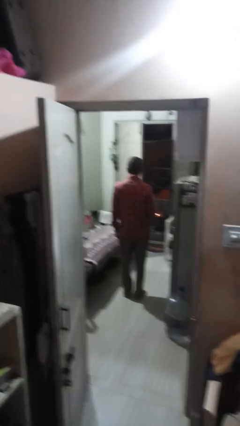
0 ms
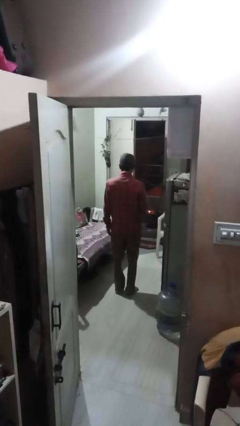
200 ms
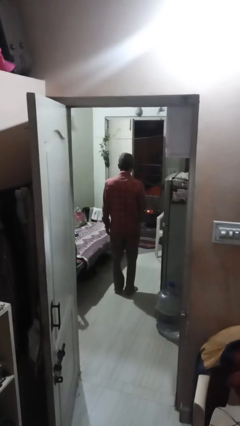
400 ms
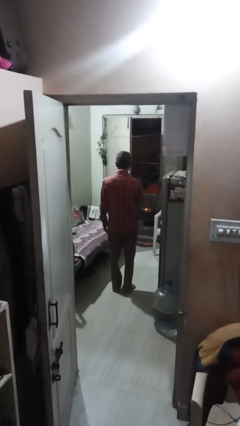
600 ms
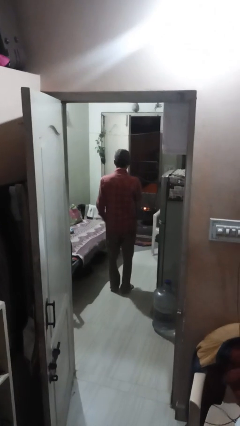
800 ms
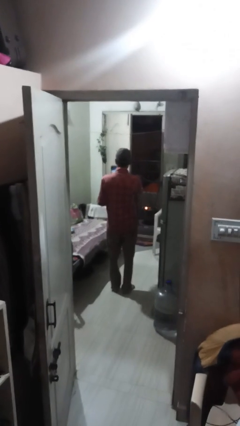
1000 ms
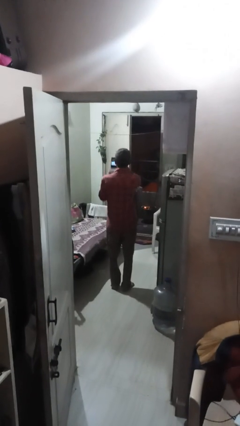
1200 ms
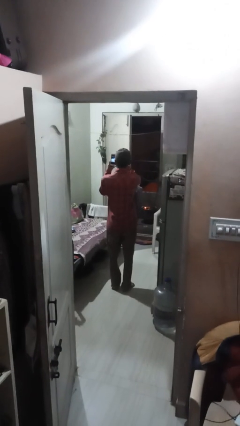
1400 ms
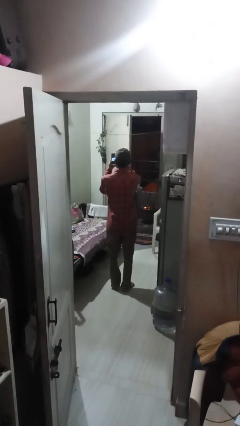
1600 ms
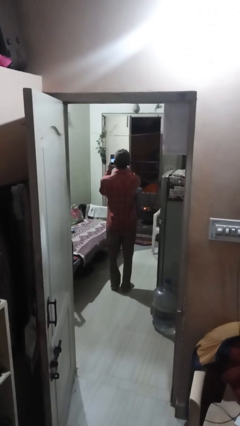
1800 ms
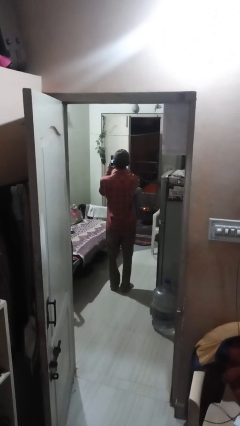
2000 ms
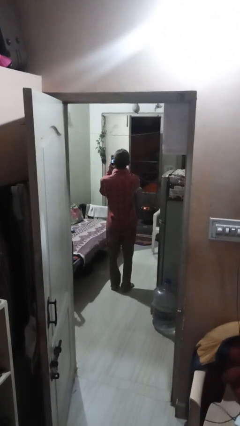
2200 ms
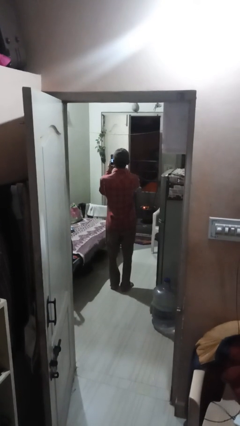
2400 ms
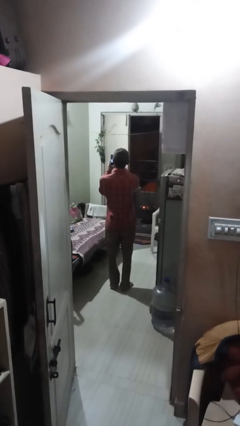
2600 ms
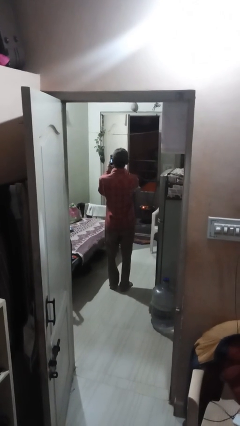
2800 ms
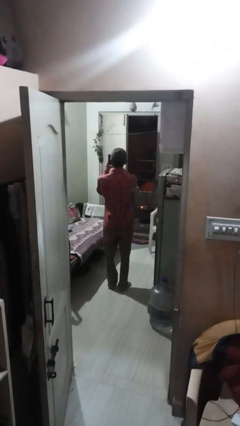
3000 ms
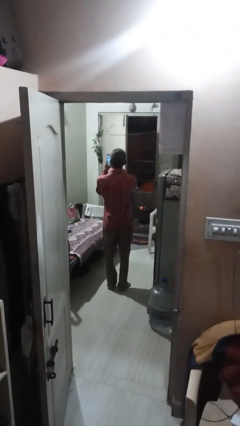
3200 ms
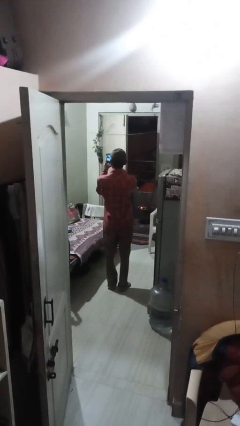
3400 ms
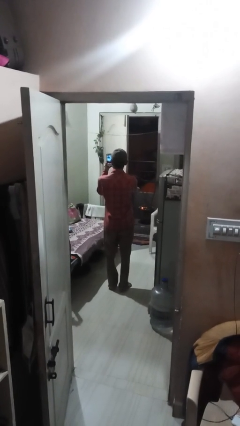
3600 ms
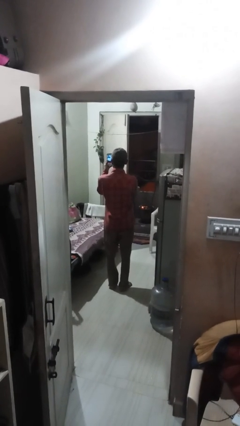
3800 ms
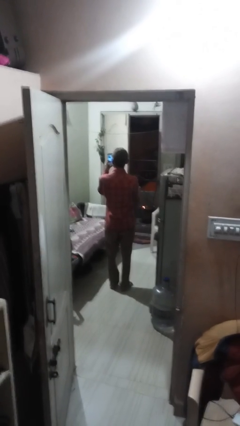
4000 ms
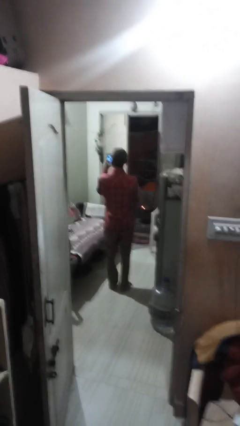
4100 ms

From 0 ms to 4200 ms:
person takes phone from pocket

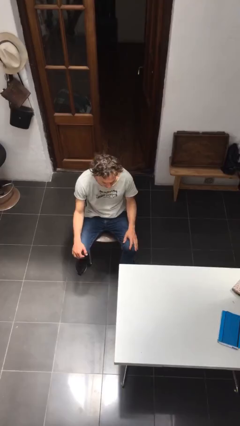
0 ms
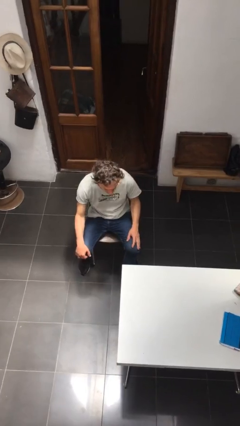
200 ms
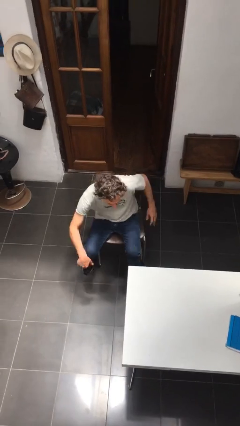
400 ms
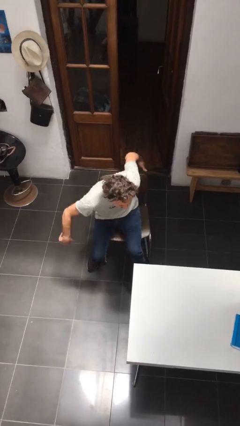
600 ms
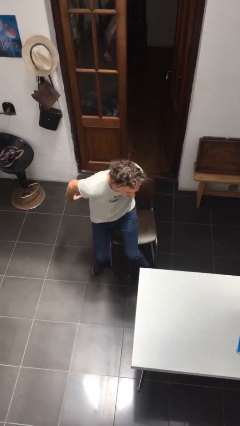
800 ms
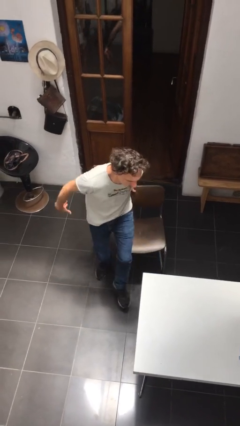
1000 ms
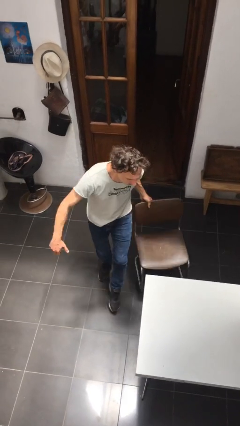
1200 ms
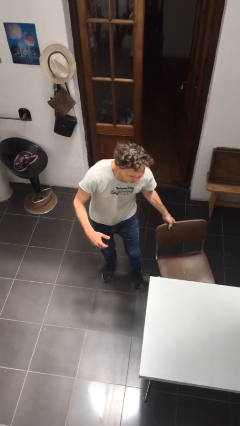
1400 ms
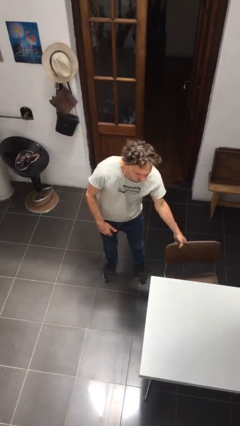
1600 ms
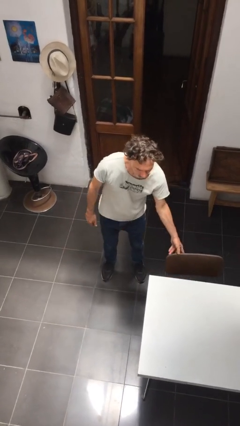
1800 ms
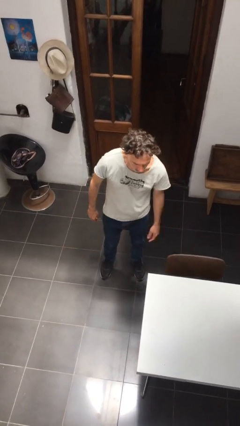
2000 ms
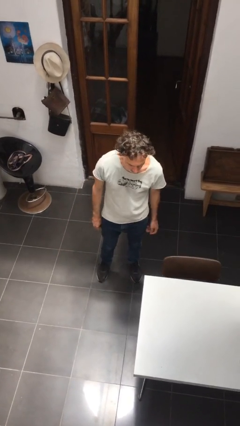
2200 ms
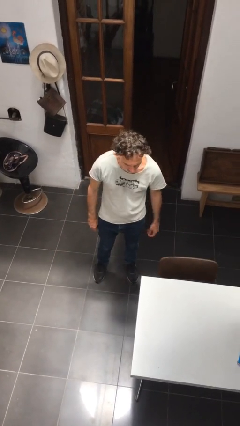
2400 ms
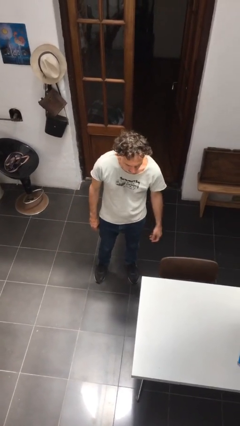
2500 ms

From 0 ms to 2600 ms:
person stands up

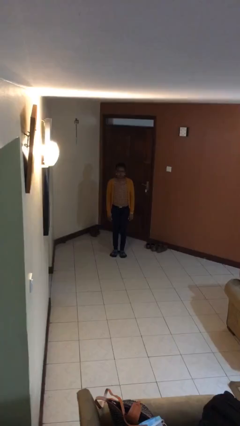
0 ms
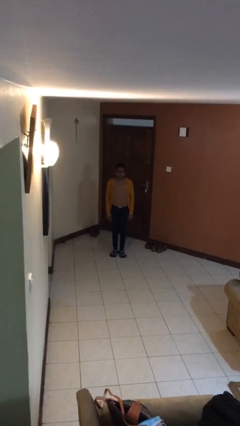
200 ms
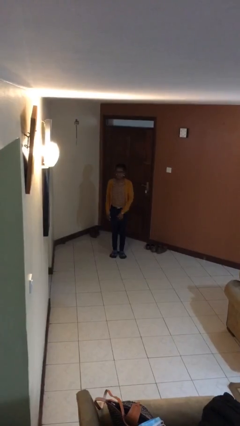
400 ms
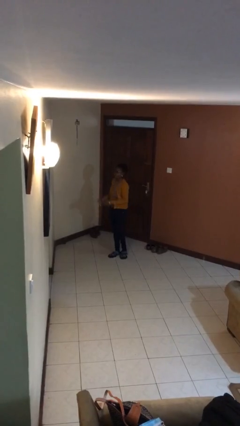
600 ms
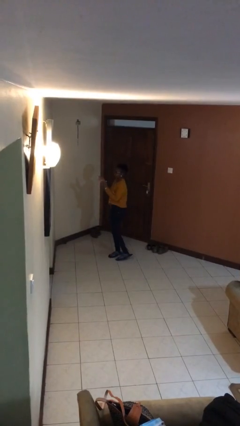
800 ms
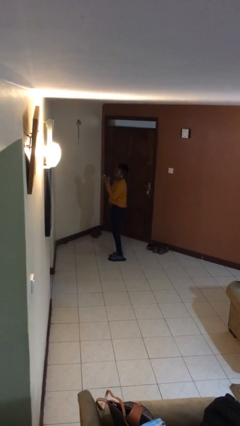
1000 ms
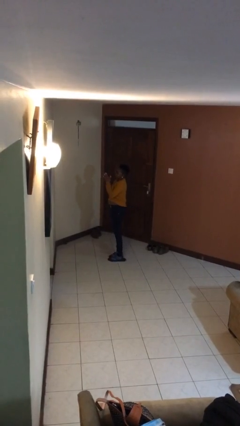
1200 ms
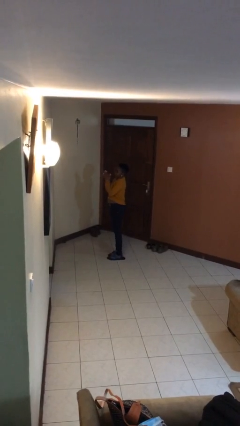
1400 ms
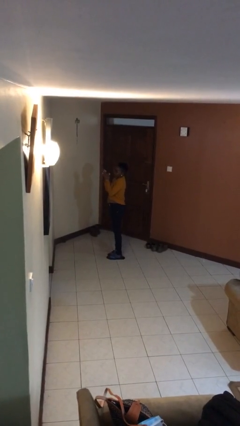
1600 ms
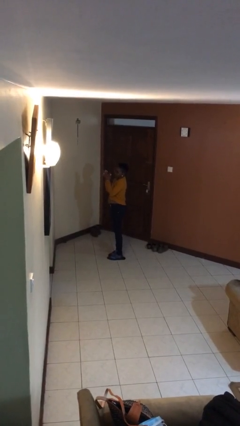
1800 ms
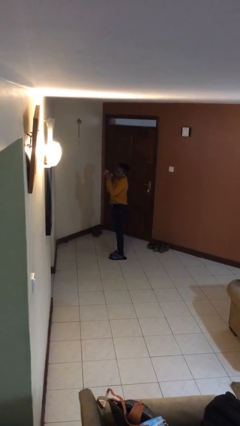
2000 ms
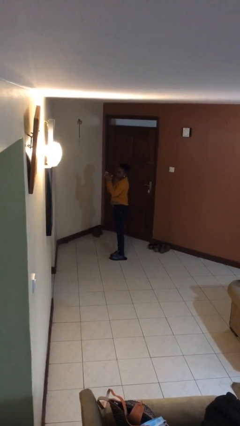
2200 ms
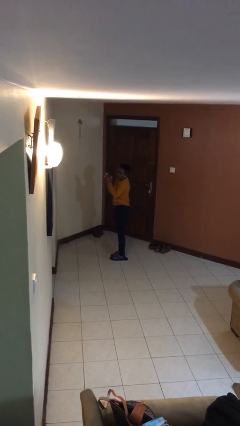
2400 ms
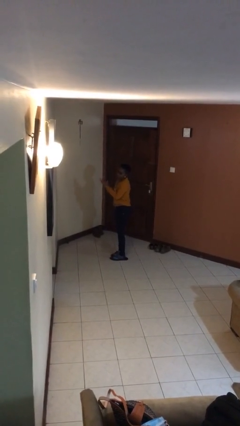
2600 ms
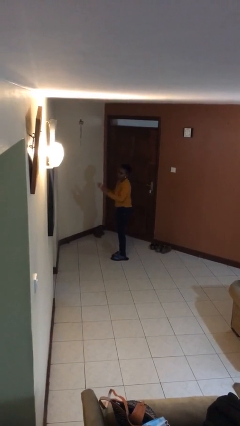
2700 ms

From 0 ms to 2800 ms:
person claps hands

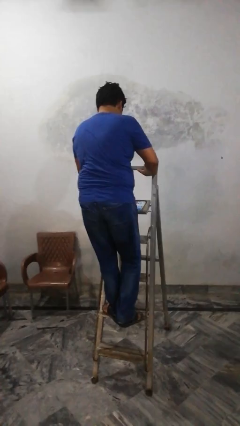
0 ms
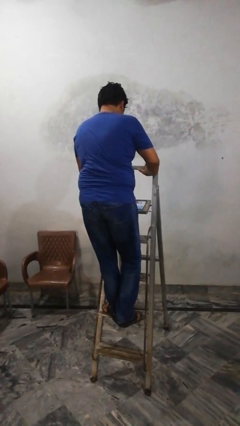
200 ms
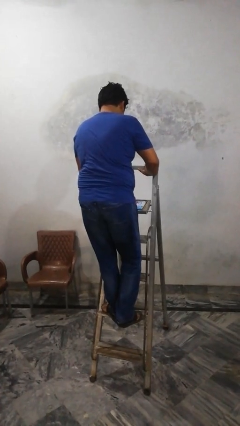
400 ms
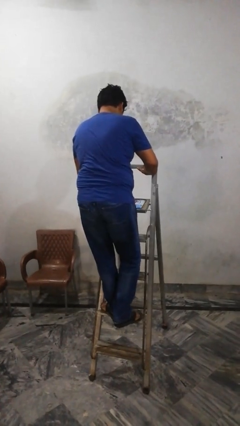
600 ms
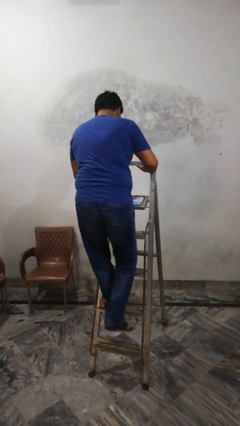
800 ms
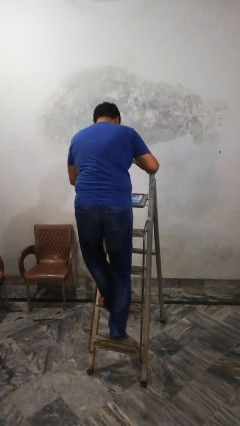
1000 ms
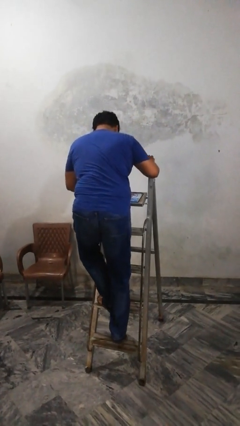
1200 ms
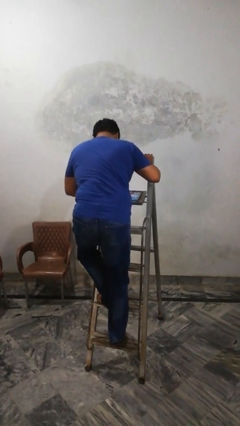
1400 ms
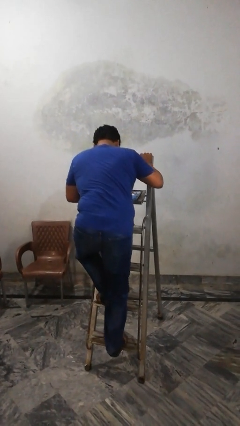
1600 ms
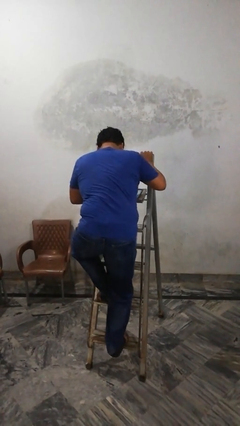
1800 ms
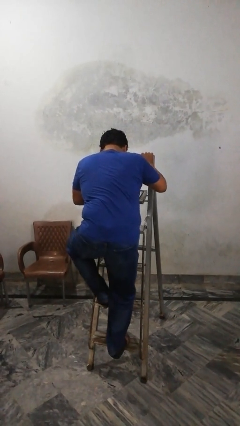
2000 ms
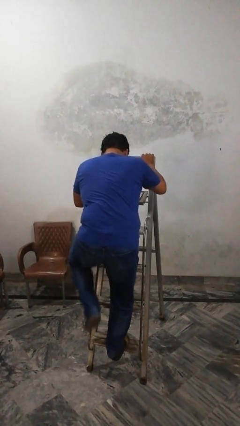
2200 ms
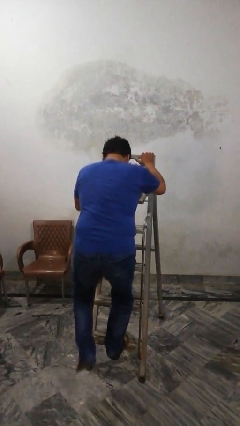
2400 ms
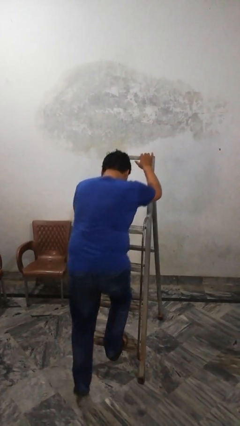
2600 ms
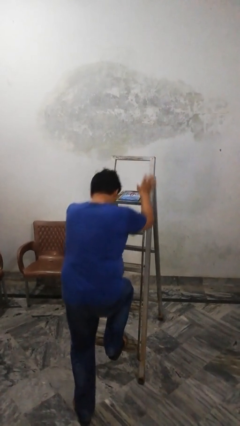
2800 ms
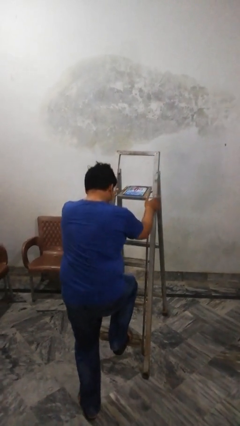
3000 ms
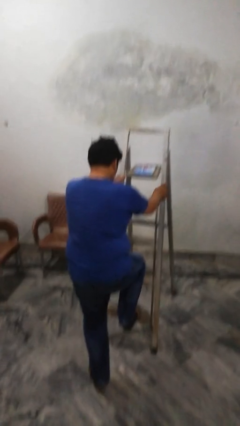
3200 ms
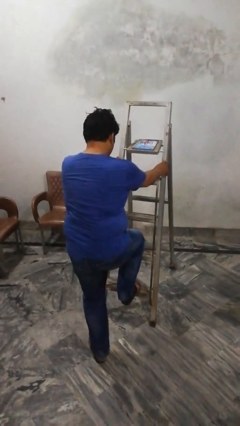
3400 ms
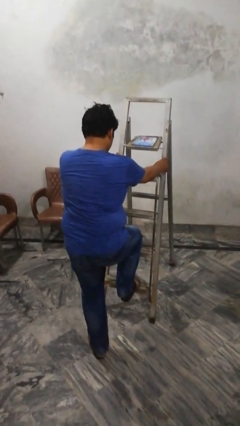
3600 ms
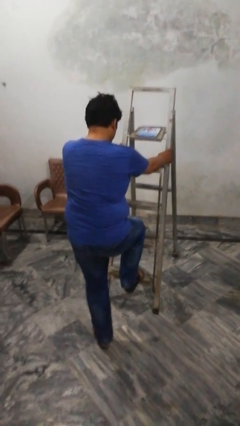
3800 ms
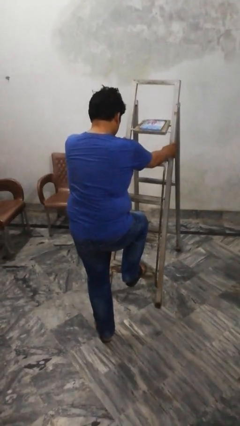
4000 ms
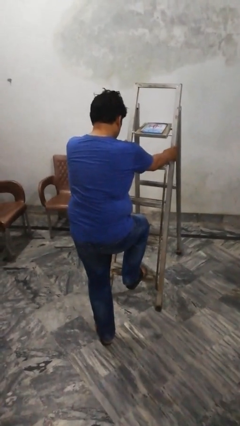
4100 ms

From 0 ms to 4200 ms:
person climbs down ladder

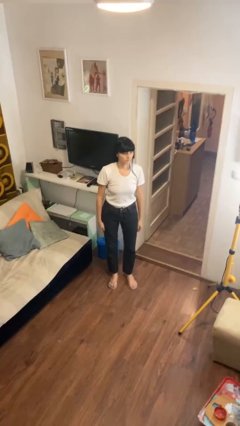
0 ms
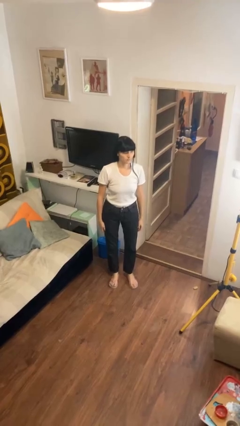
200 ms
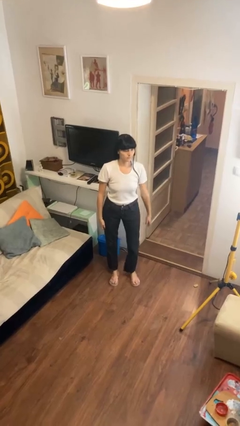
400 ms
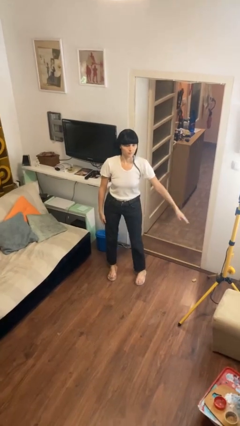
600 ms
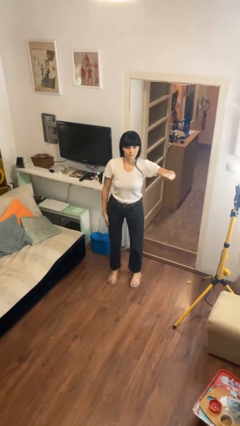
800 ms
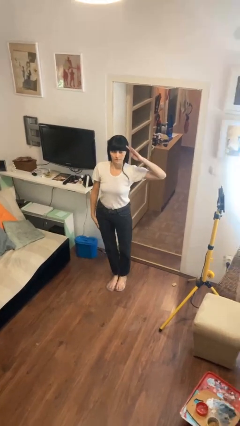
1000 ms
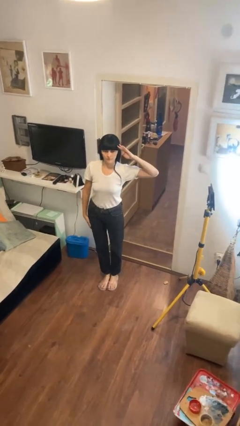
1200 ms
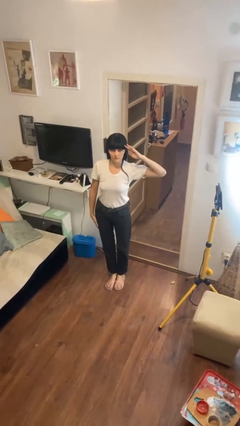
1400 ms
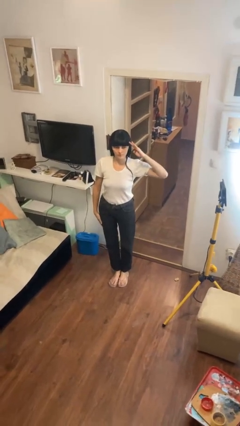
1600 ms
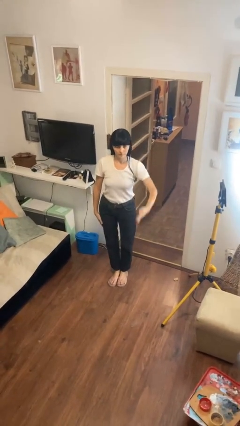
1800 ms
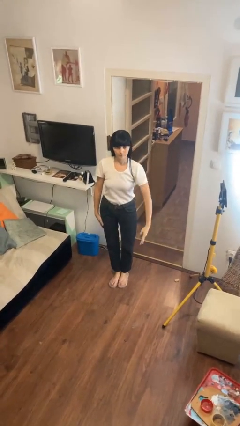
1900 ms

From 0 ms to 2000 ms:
person salutes

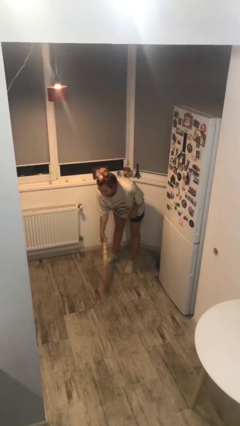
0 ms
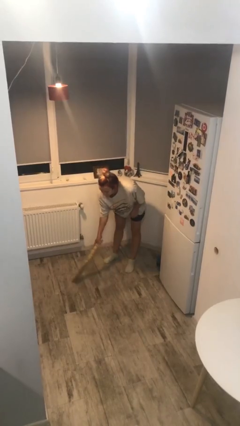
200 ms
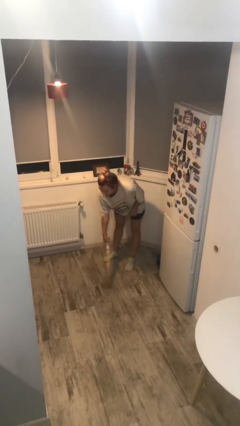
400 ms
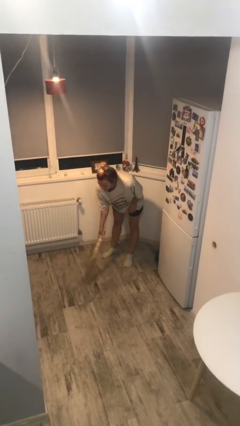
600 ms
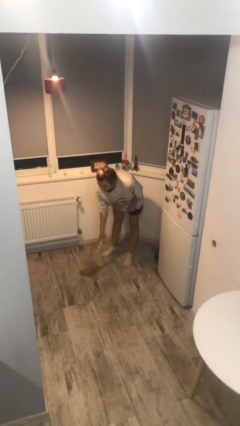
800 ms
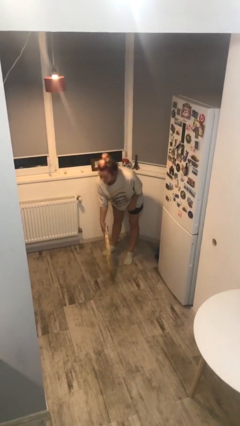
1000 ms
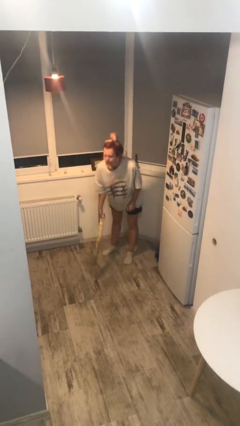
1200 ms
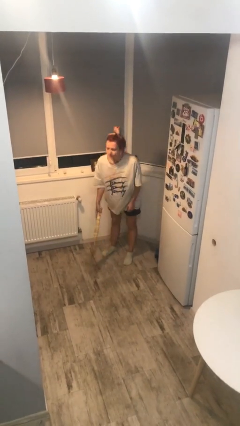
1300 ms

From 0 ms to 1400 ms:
person sweeps floor

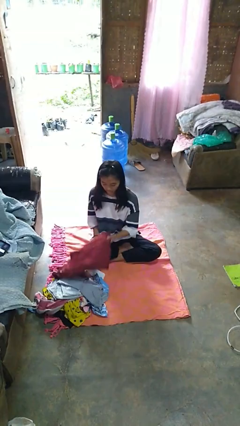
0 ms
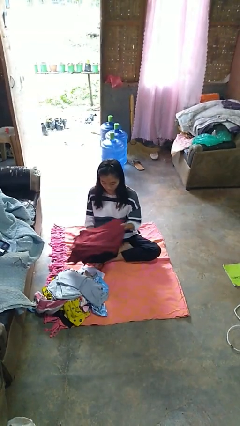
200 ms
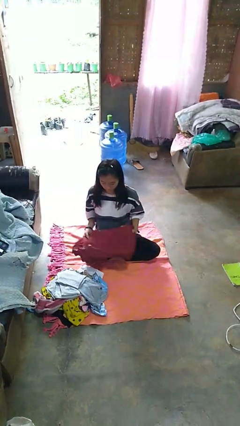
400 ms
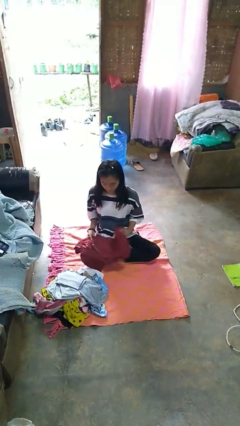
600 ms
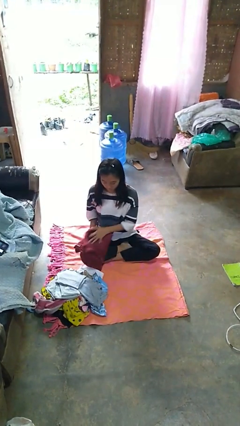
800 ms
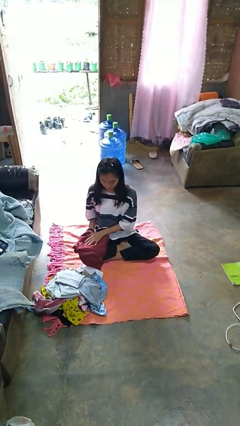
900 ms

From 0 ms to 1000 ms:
person folds pants
